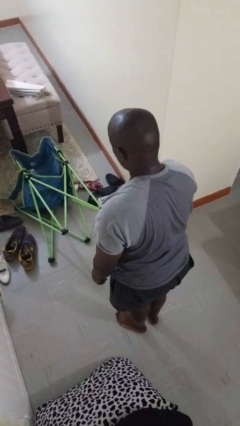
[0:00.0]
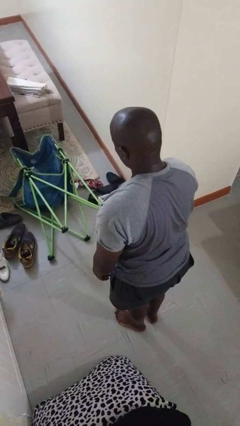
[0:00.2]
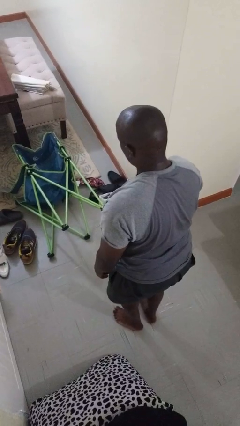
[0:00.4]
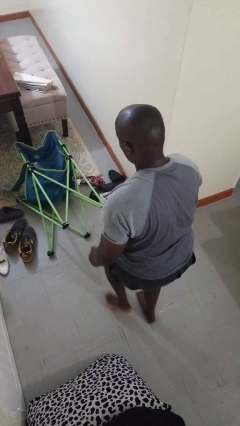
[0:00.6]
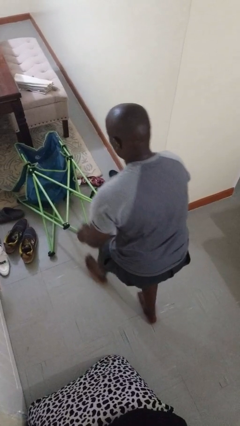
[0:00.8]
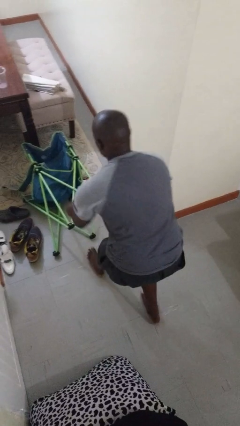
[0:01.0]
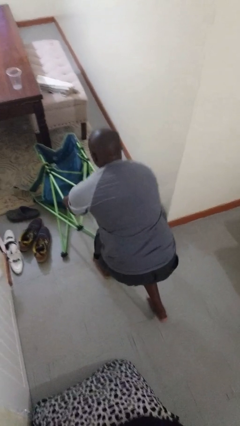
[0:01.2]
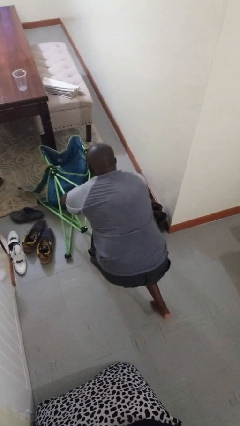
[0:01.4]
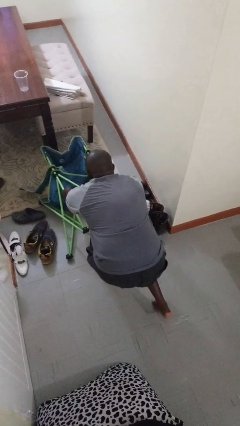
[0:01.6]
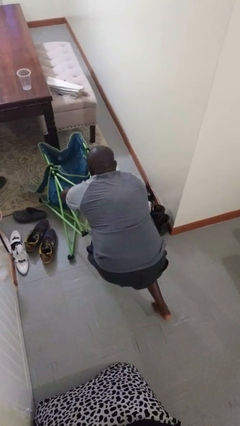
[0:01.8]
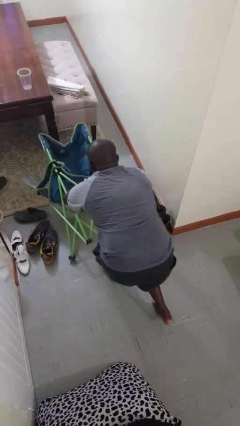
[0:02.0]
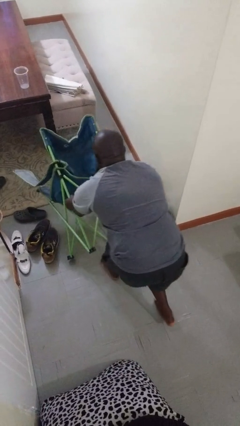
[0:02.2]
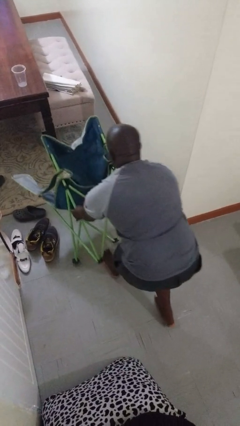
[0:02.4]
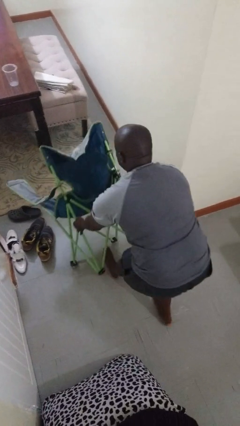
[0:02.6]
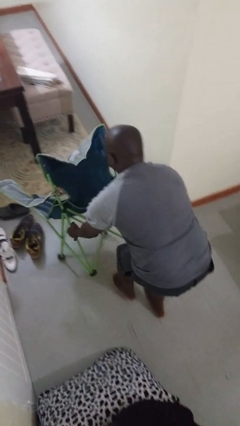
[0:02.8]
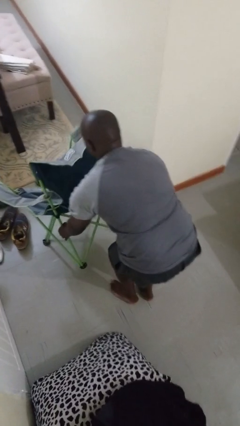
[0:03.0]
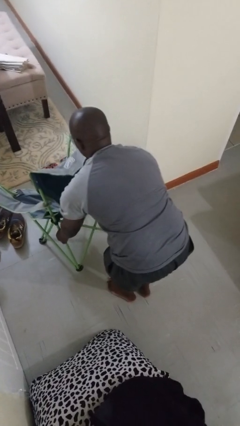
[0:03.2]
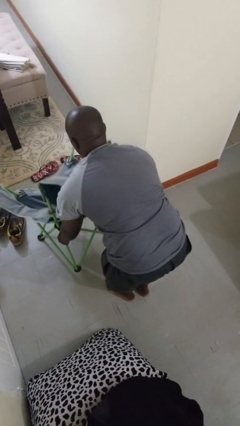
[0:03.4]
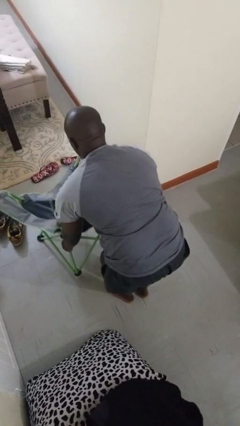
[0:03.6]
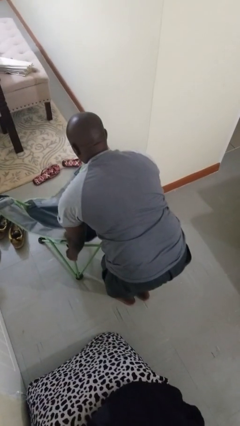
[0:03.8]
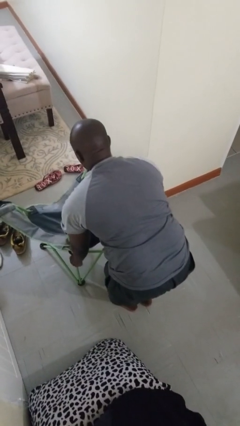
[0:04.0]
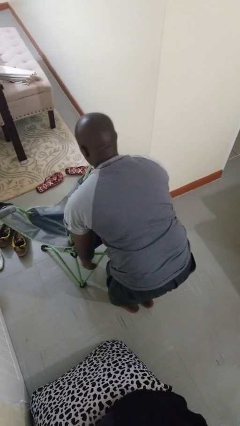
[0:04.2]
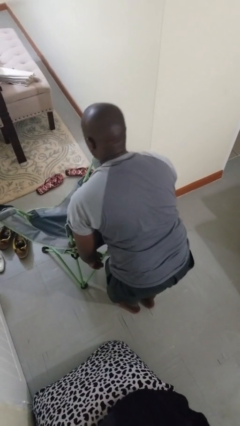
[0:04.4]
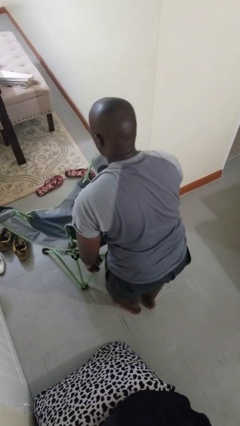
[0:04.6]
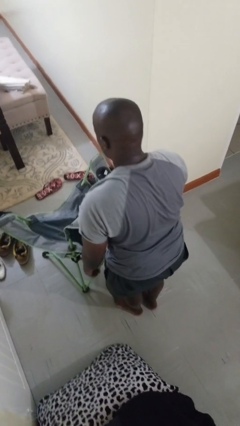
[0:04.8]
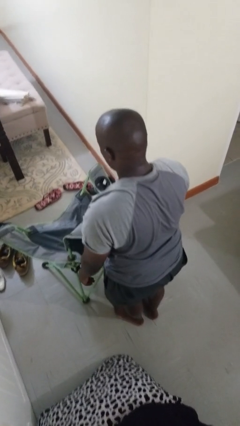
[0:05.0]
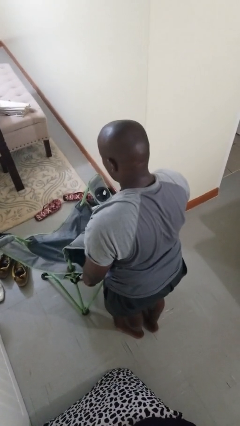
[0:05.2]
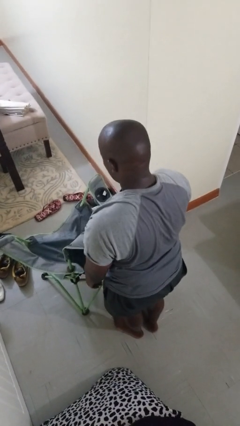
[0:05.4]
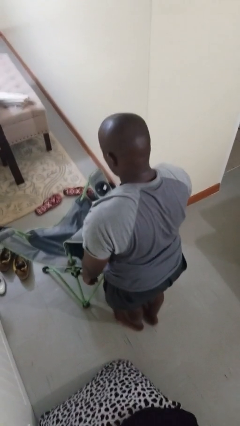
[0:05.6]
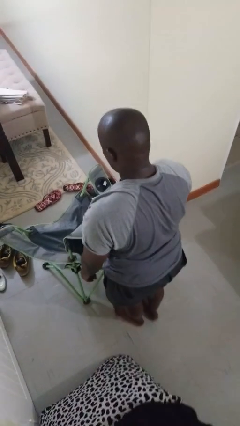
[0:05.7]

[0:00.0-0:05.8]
person sets upright furniture

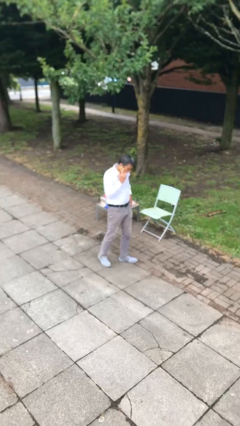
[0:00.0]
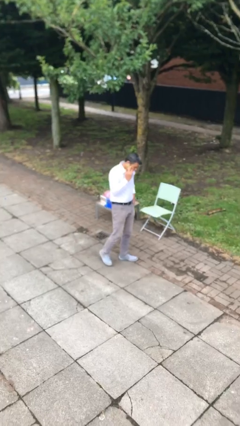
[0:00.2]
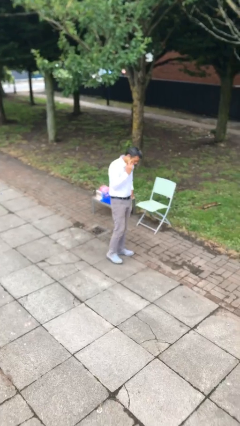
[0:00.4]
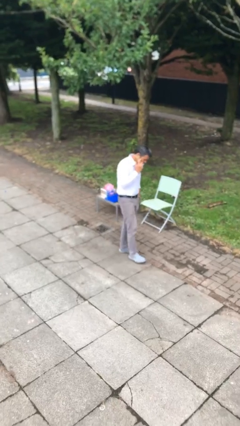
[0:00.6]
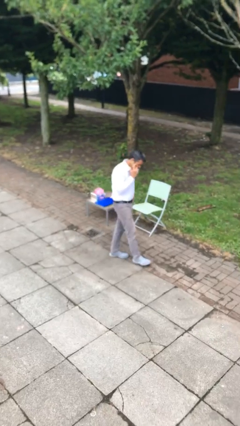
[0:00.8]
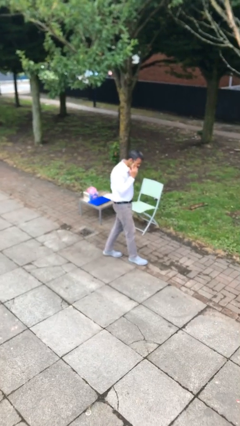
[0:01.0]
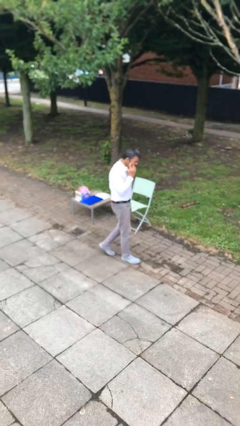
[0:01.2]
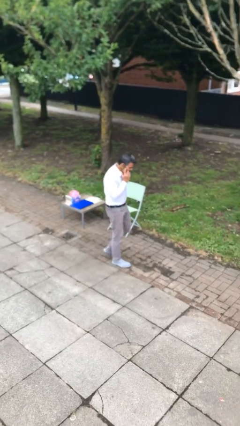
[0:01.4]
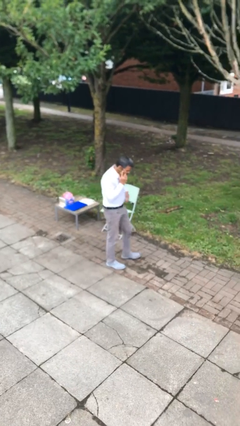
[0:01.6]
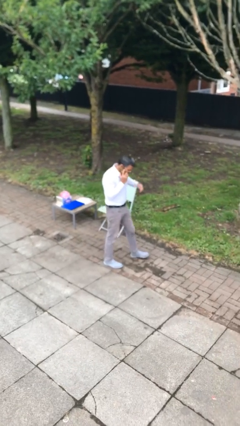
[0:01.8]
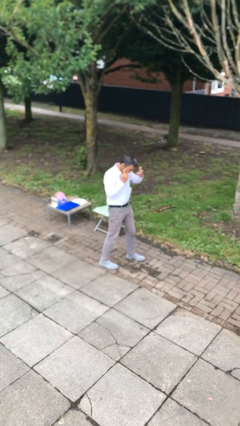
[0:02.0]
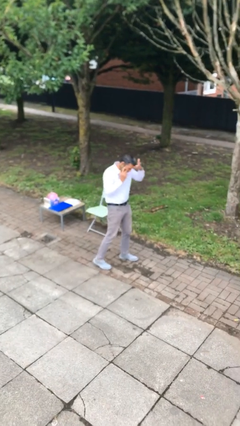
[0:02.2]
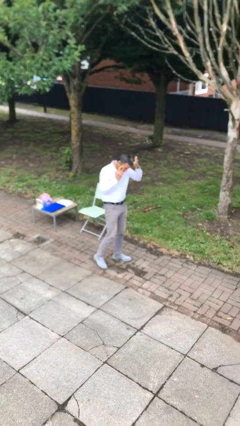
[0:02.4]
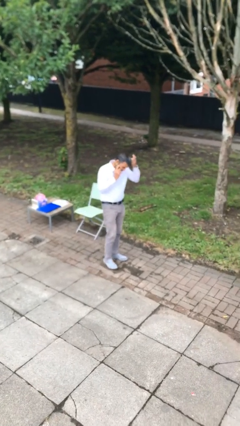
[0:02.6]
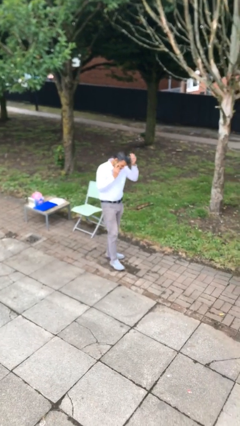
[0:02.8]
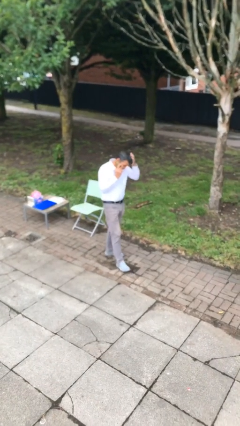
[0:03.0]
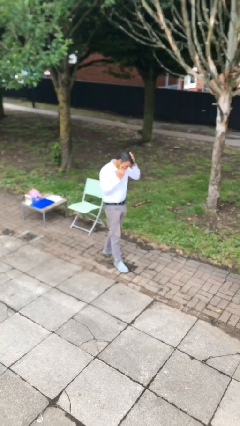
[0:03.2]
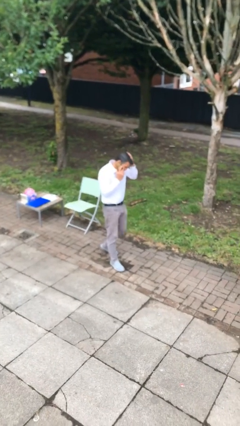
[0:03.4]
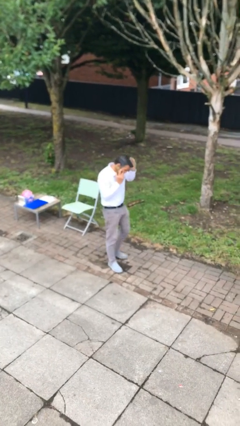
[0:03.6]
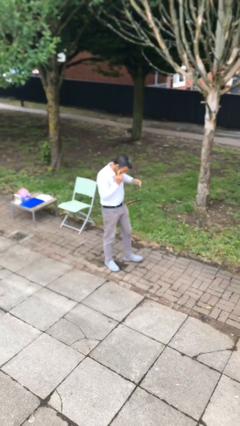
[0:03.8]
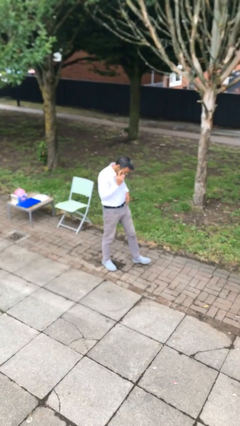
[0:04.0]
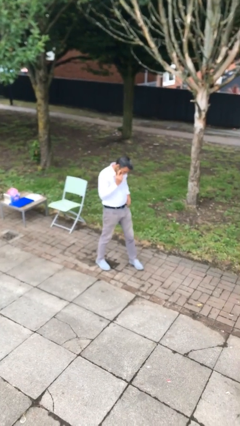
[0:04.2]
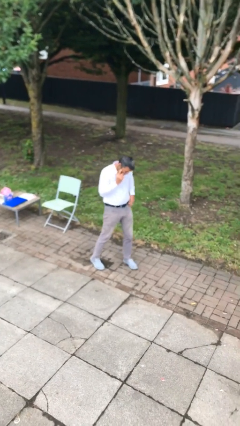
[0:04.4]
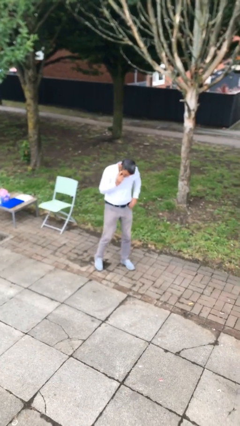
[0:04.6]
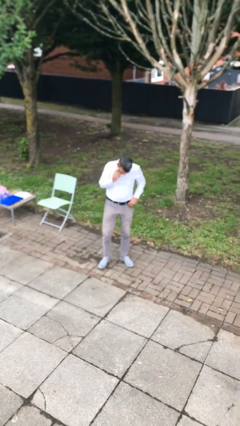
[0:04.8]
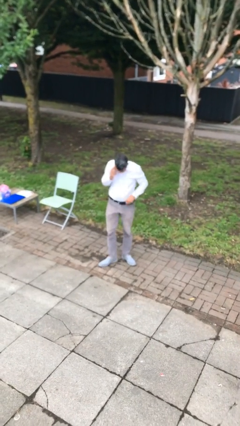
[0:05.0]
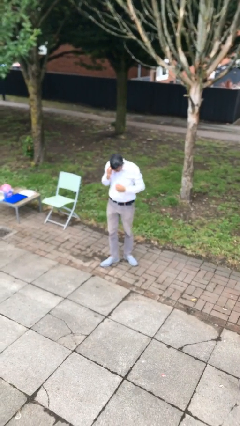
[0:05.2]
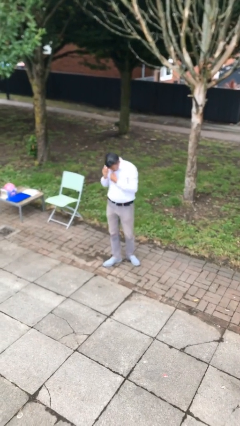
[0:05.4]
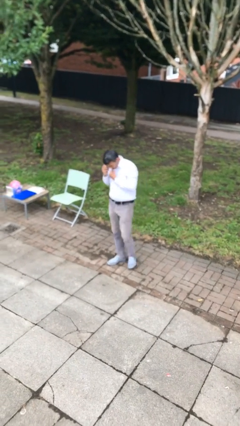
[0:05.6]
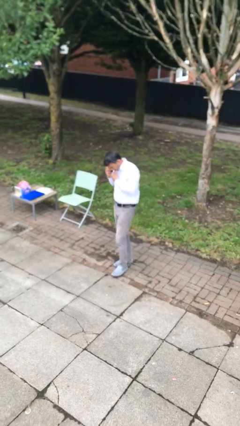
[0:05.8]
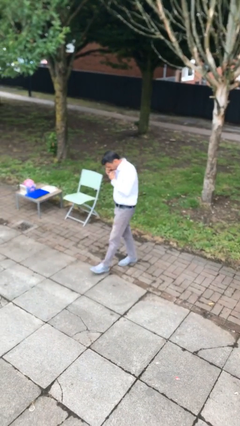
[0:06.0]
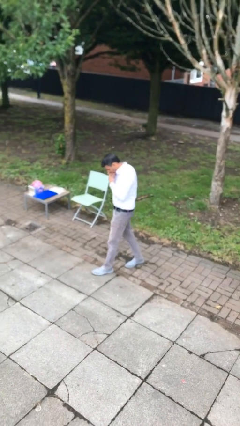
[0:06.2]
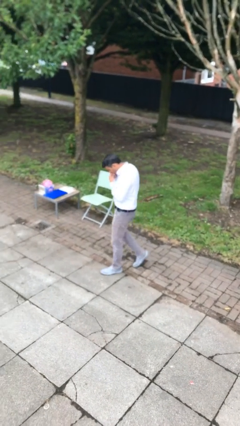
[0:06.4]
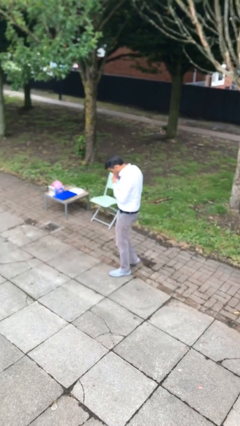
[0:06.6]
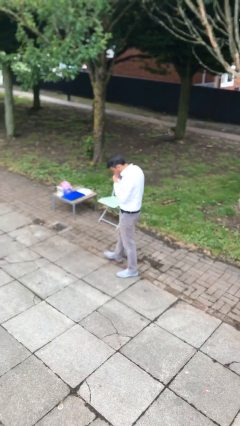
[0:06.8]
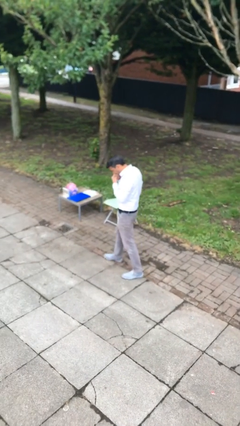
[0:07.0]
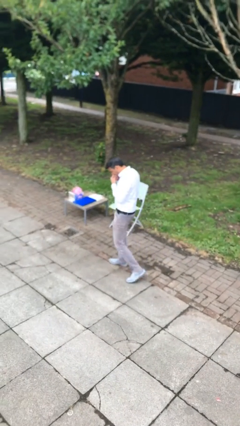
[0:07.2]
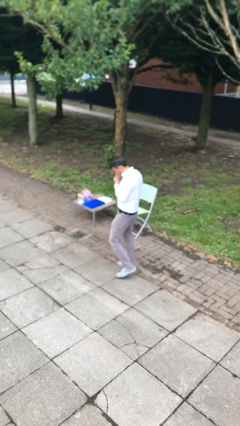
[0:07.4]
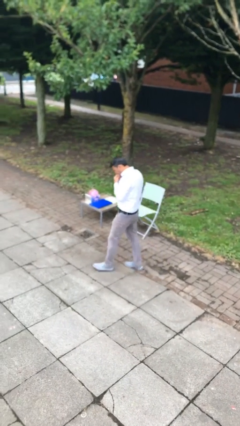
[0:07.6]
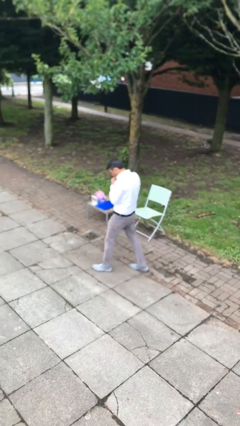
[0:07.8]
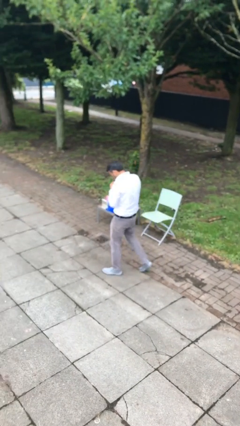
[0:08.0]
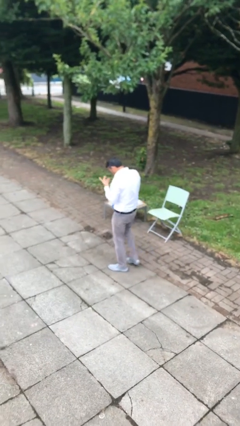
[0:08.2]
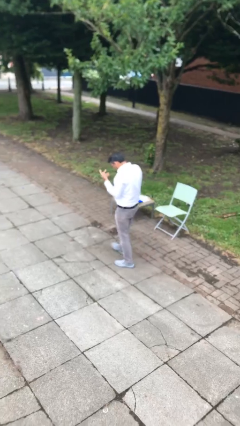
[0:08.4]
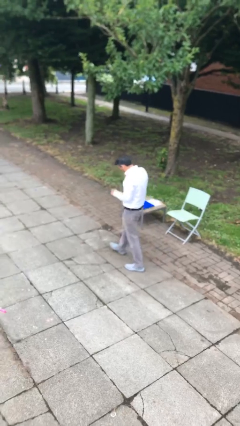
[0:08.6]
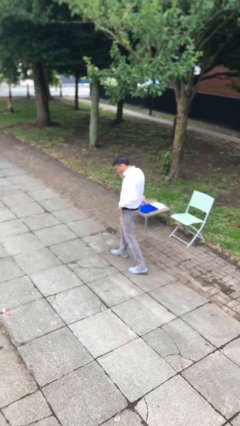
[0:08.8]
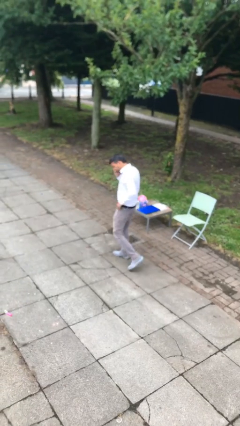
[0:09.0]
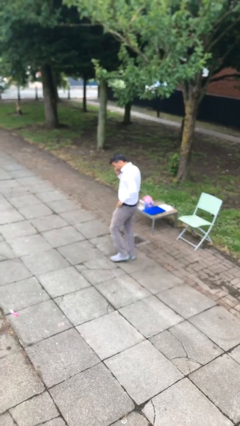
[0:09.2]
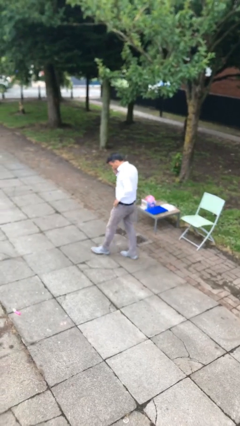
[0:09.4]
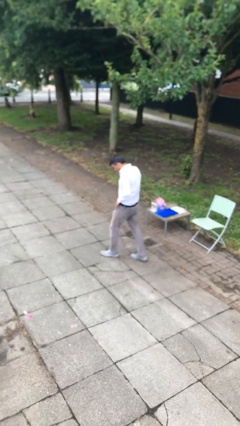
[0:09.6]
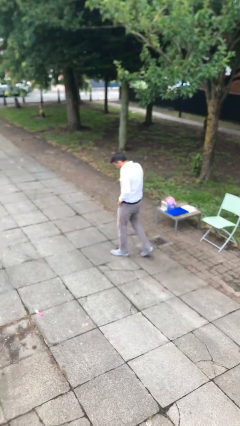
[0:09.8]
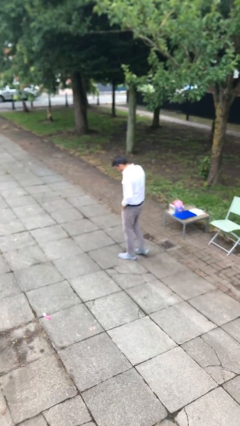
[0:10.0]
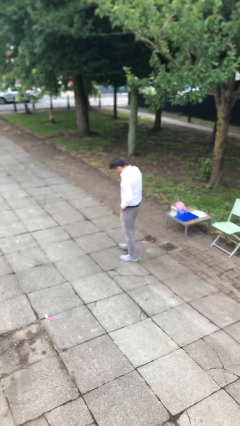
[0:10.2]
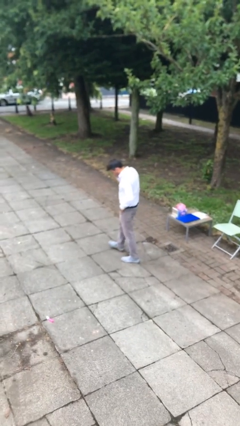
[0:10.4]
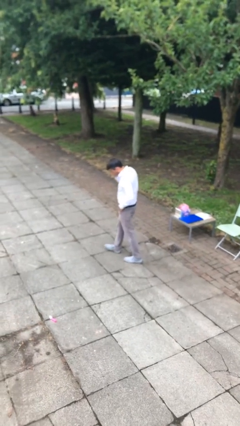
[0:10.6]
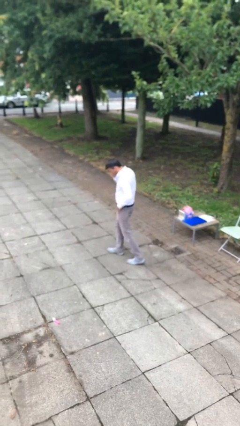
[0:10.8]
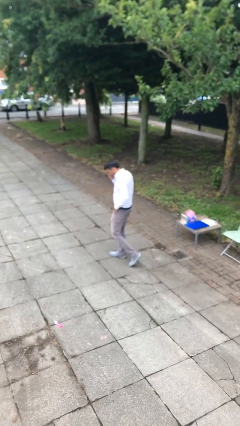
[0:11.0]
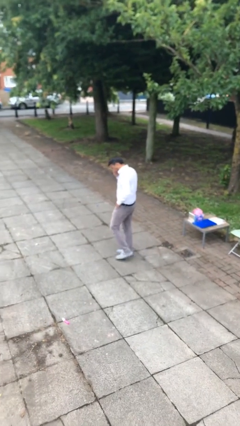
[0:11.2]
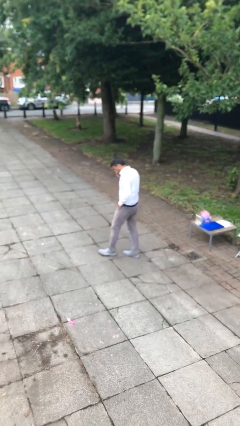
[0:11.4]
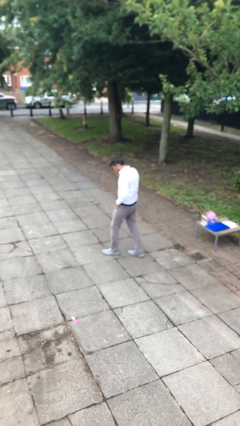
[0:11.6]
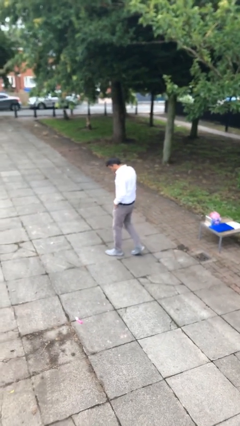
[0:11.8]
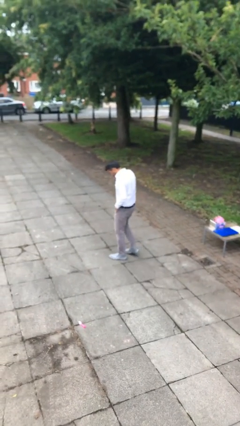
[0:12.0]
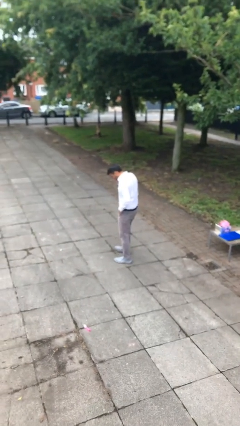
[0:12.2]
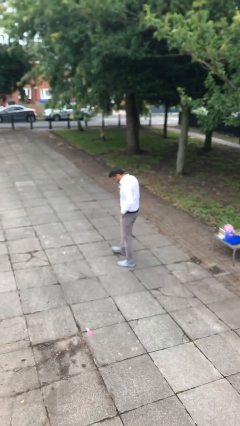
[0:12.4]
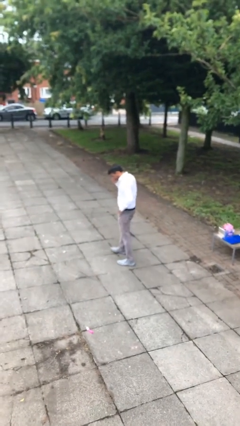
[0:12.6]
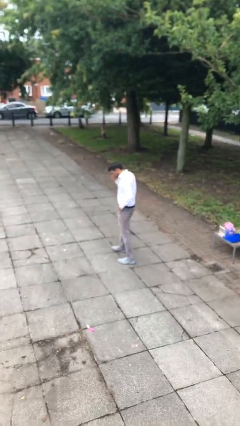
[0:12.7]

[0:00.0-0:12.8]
person talks on phone
